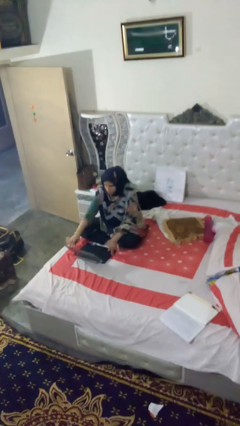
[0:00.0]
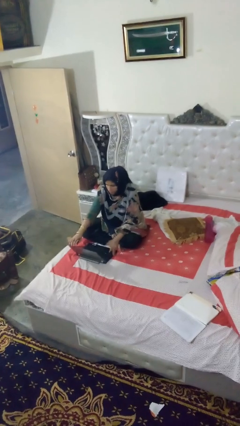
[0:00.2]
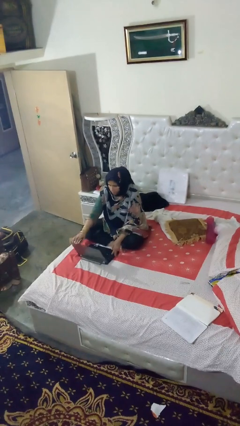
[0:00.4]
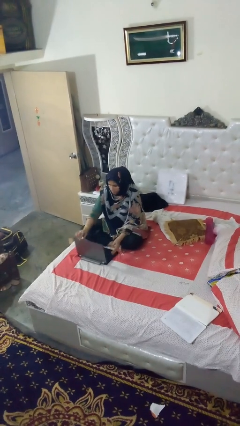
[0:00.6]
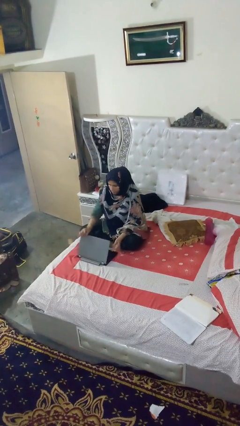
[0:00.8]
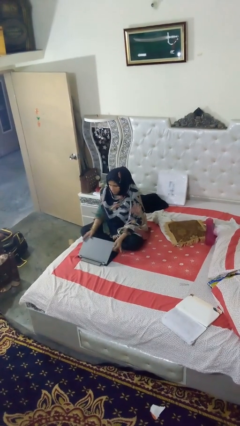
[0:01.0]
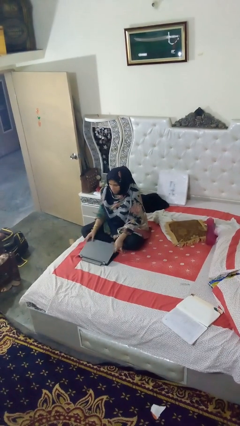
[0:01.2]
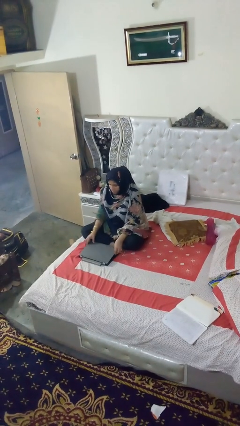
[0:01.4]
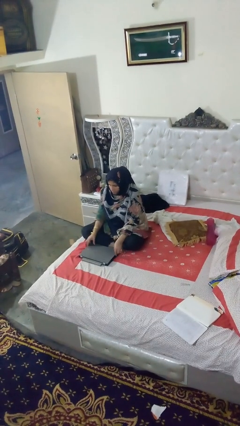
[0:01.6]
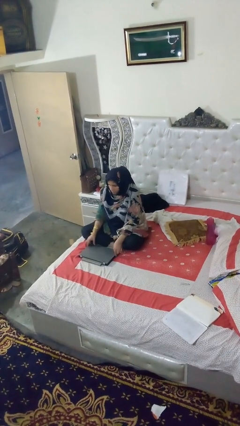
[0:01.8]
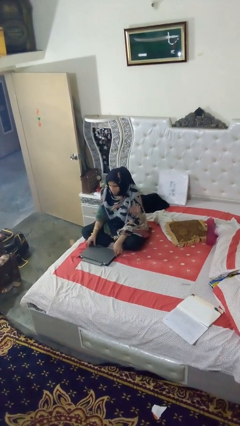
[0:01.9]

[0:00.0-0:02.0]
person closes laptop

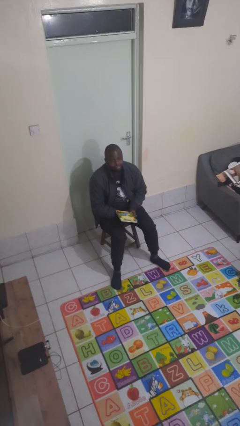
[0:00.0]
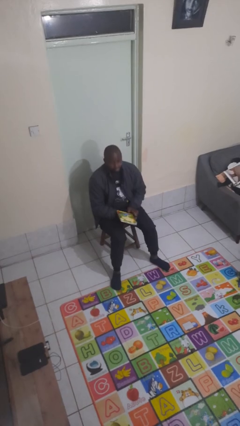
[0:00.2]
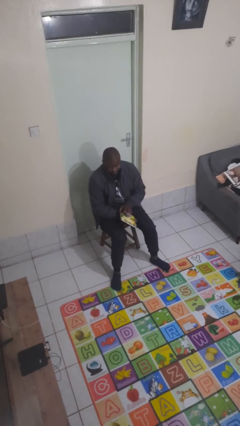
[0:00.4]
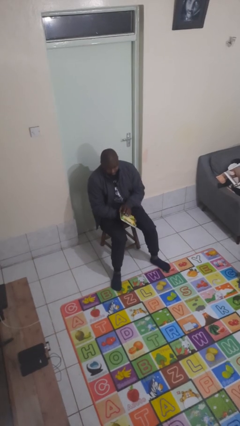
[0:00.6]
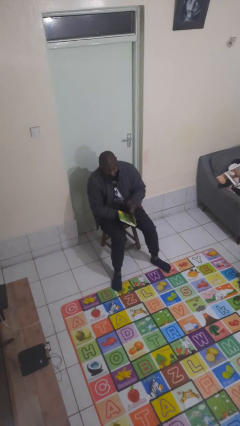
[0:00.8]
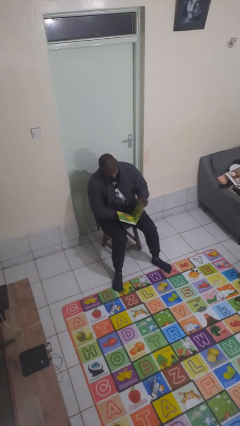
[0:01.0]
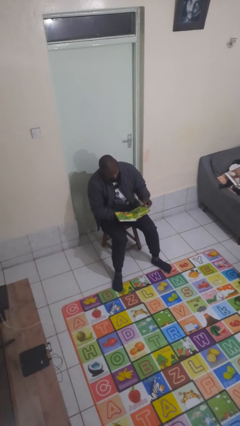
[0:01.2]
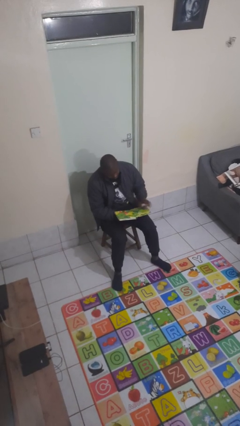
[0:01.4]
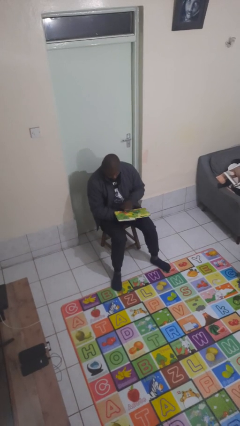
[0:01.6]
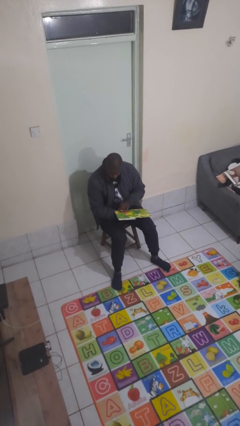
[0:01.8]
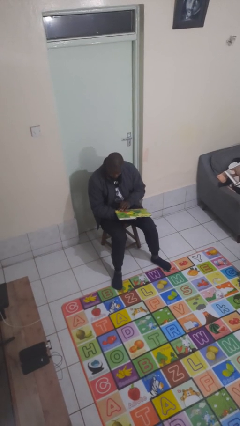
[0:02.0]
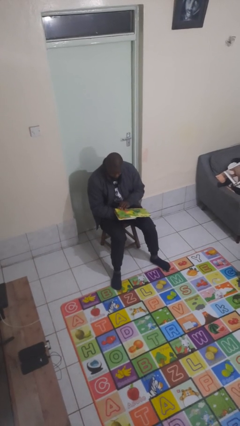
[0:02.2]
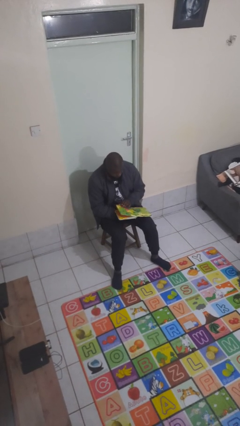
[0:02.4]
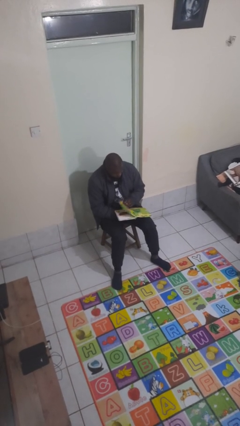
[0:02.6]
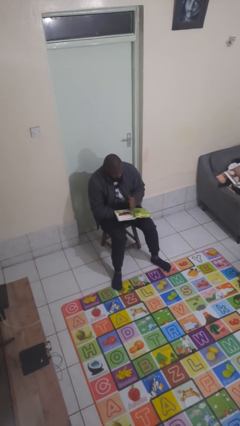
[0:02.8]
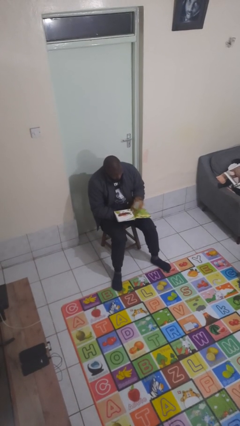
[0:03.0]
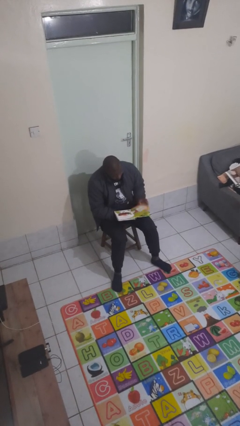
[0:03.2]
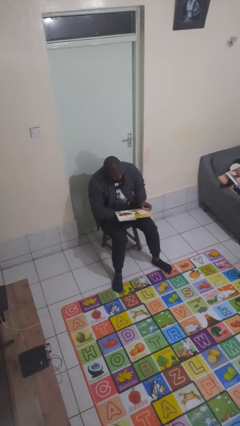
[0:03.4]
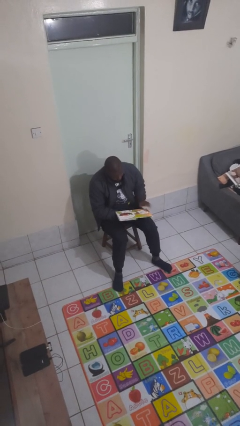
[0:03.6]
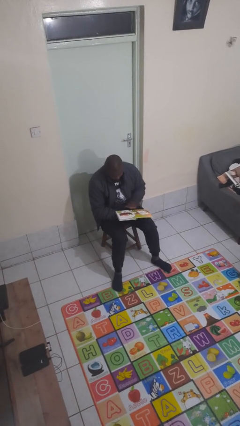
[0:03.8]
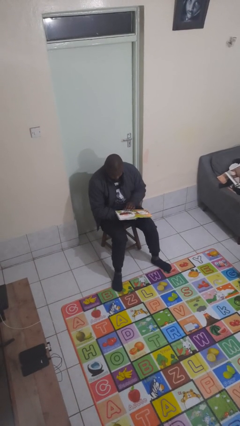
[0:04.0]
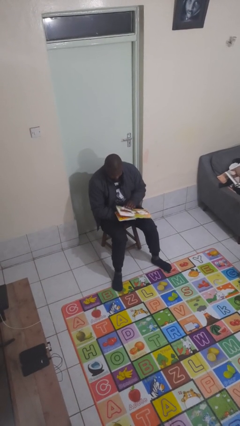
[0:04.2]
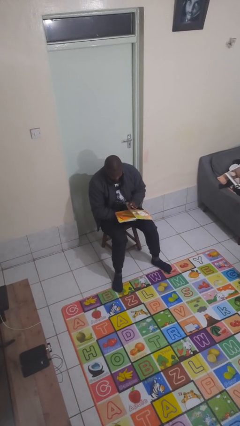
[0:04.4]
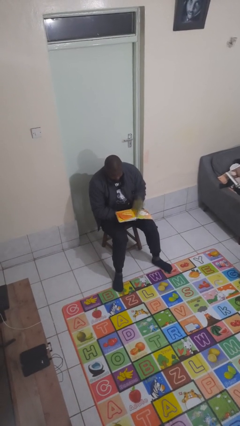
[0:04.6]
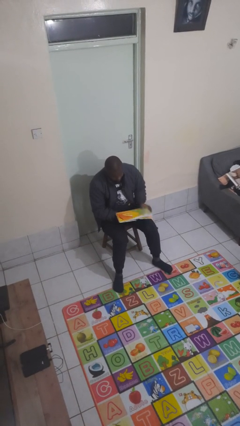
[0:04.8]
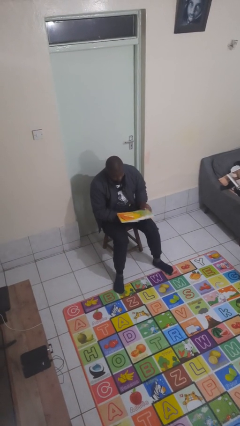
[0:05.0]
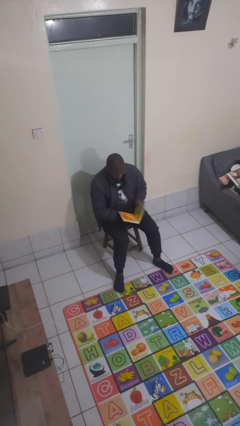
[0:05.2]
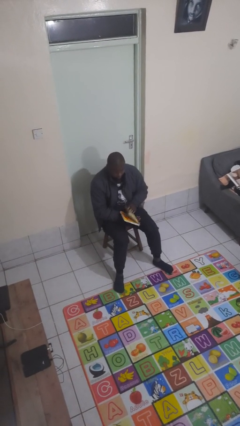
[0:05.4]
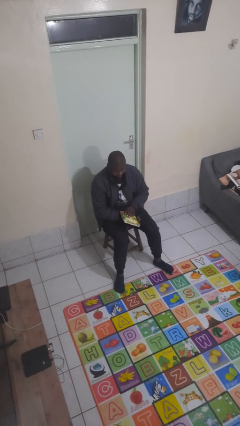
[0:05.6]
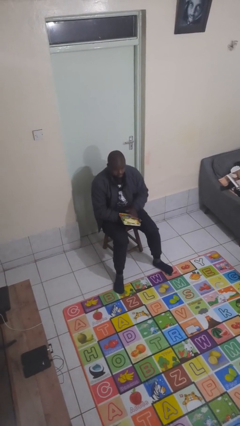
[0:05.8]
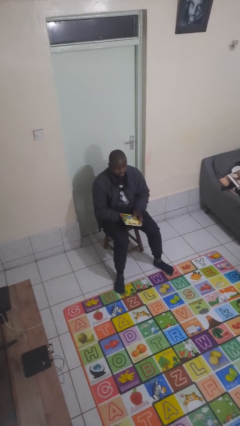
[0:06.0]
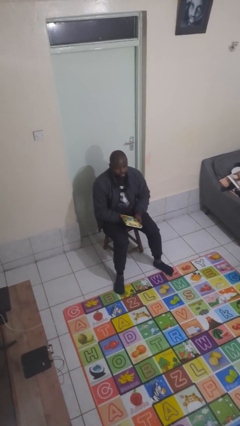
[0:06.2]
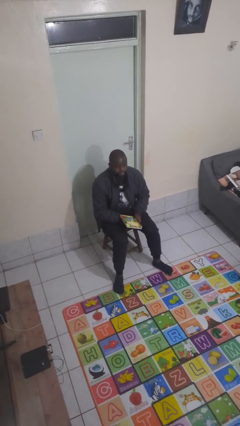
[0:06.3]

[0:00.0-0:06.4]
person reads book

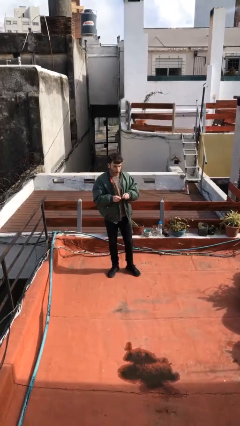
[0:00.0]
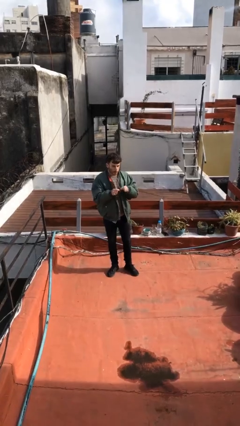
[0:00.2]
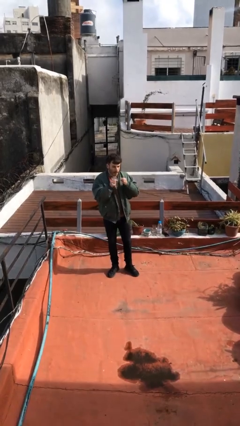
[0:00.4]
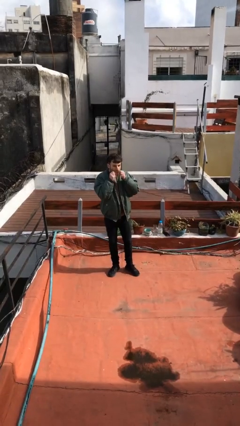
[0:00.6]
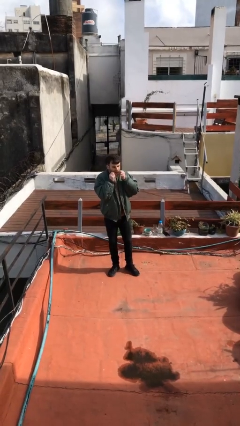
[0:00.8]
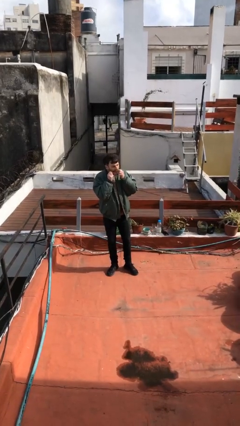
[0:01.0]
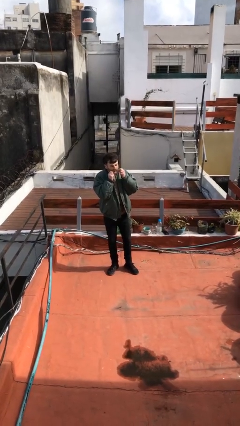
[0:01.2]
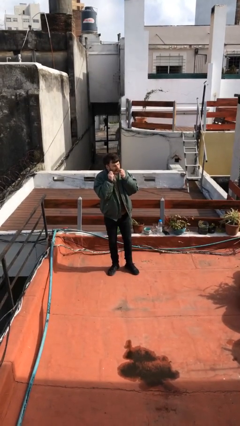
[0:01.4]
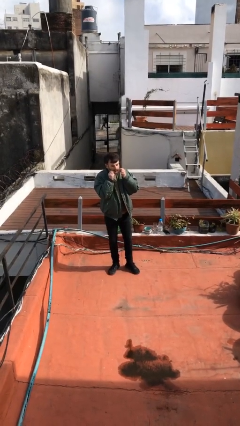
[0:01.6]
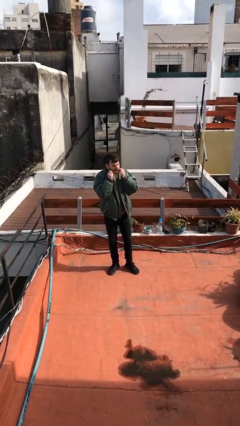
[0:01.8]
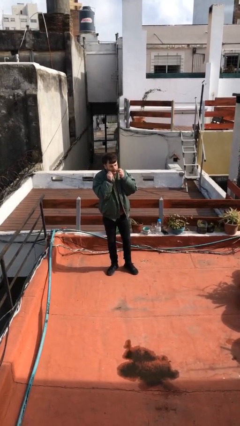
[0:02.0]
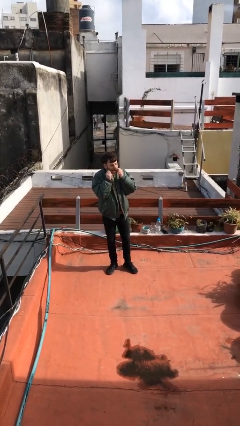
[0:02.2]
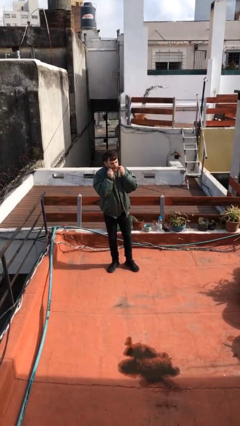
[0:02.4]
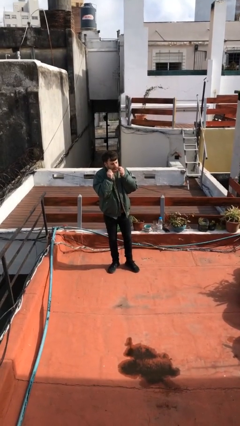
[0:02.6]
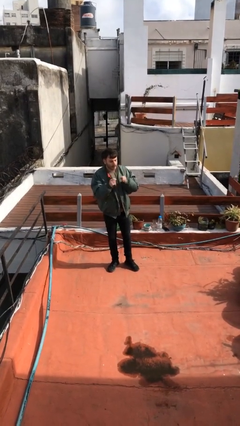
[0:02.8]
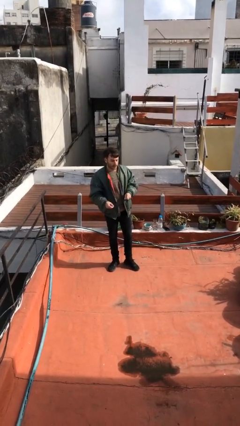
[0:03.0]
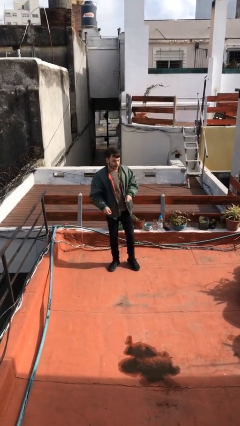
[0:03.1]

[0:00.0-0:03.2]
person flosses

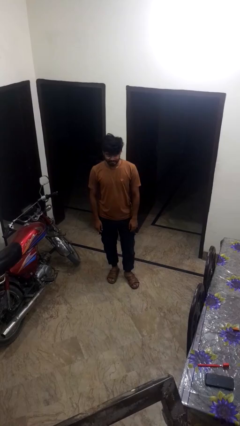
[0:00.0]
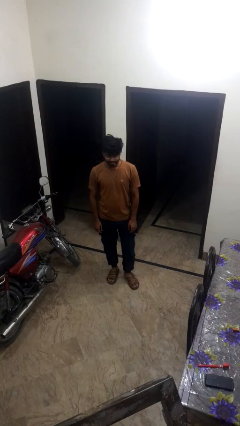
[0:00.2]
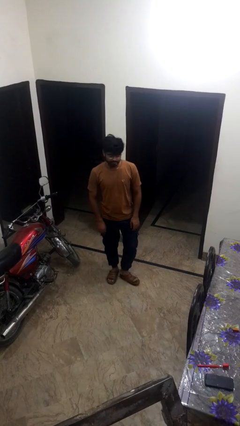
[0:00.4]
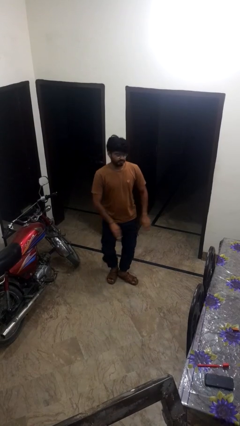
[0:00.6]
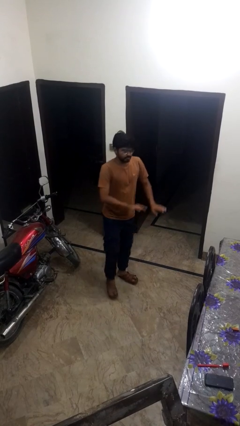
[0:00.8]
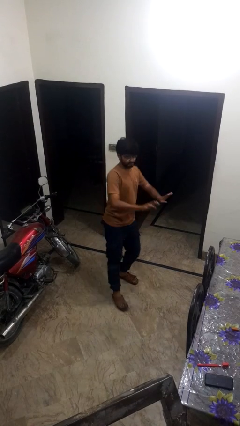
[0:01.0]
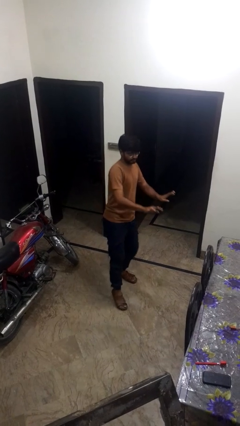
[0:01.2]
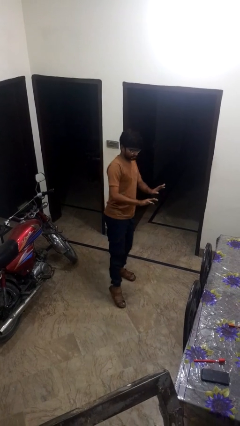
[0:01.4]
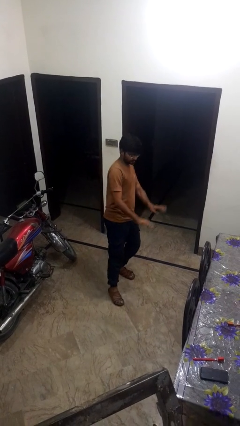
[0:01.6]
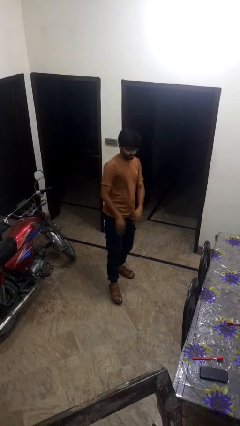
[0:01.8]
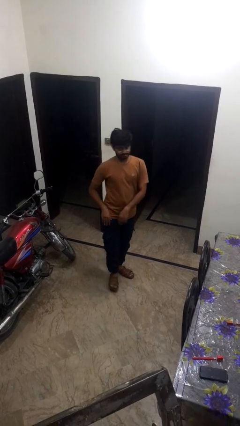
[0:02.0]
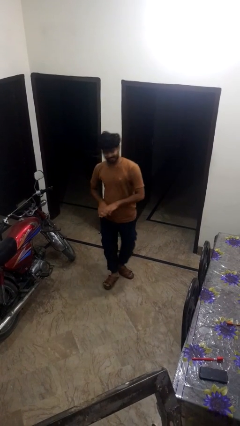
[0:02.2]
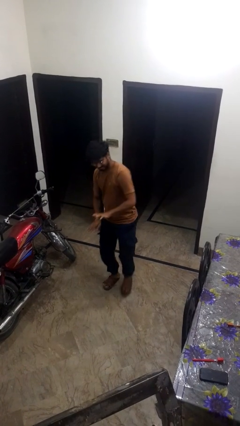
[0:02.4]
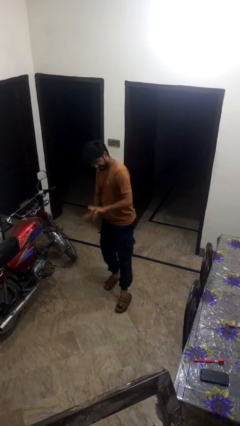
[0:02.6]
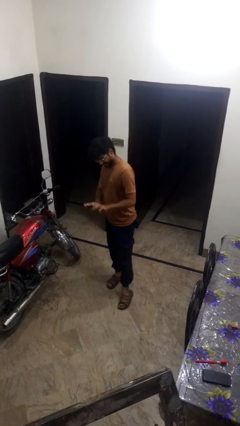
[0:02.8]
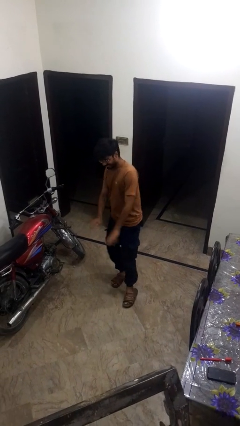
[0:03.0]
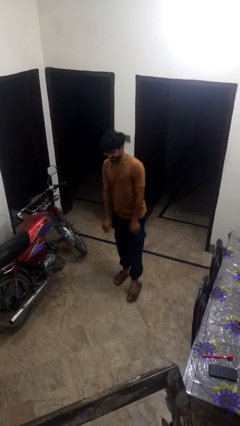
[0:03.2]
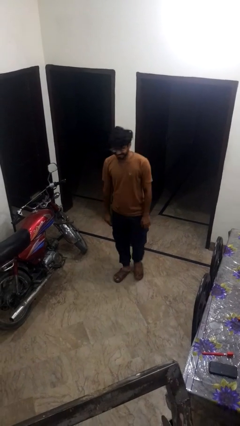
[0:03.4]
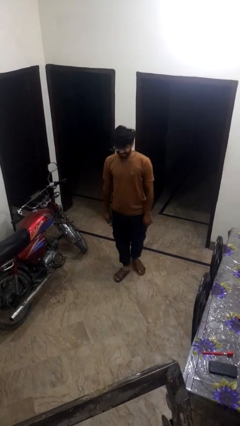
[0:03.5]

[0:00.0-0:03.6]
person dances in place

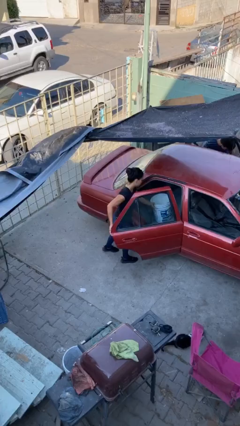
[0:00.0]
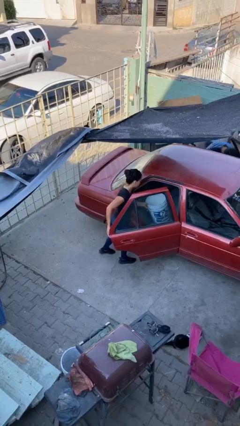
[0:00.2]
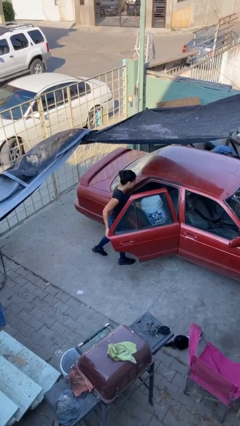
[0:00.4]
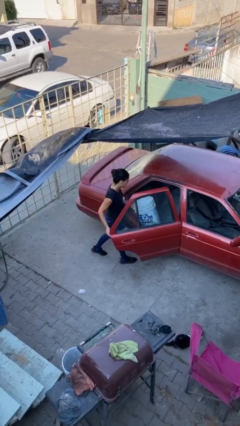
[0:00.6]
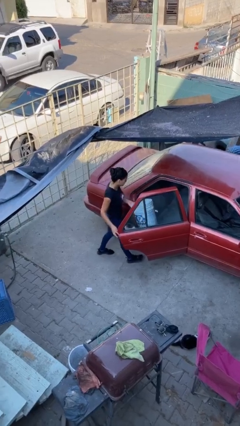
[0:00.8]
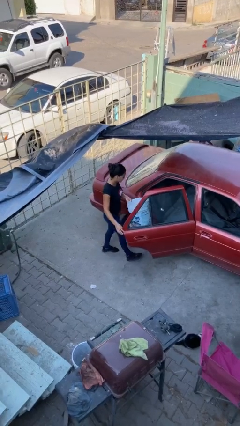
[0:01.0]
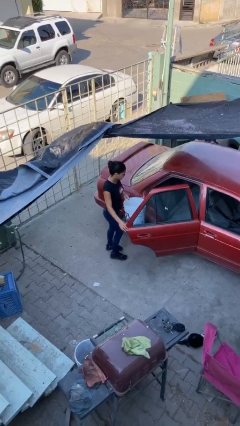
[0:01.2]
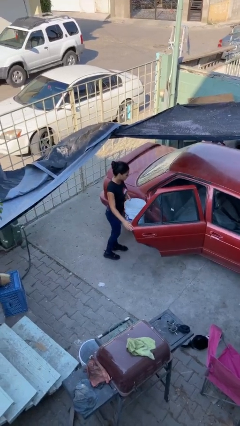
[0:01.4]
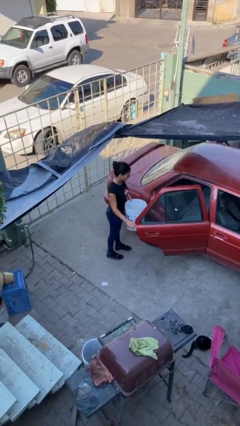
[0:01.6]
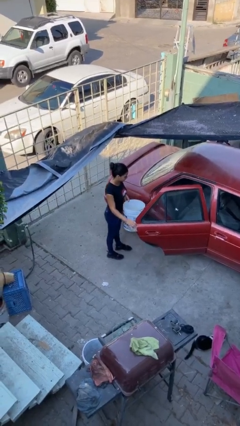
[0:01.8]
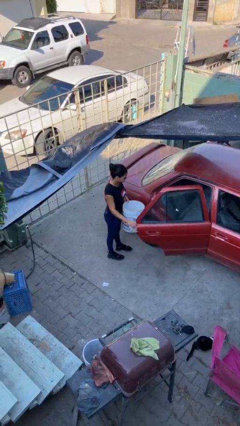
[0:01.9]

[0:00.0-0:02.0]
person unloads car
